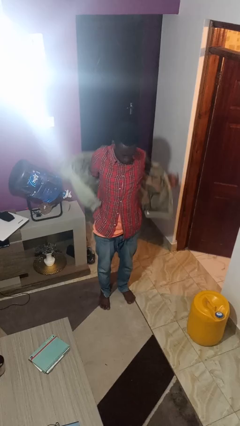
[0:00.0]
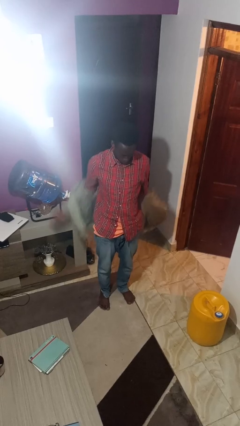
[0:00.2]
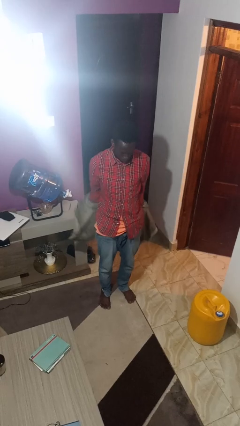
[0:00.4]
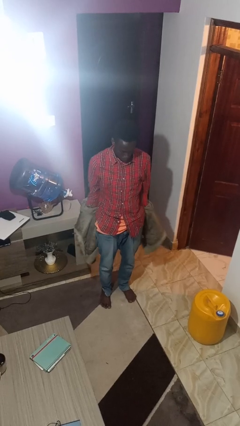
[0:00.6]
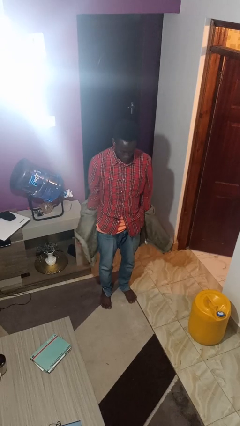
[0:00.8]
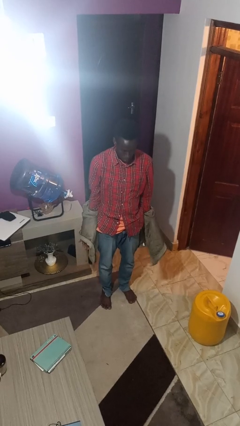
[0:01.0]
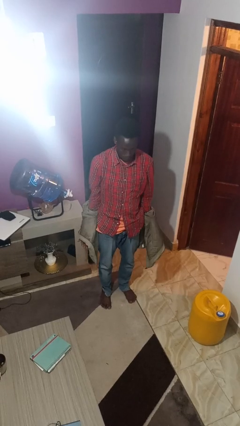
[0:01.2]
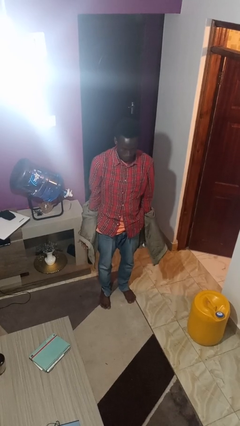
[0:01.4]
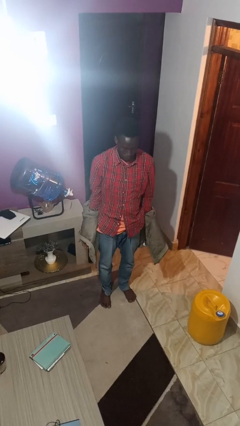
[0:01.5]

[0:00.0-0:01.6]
person takes off jacket

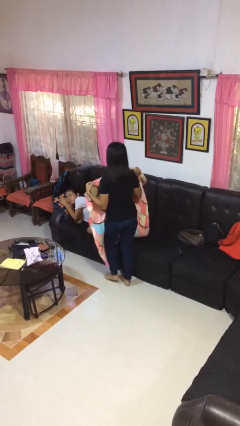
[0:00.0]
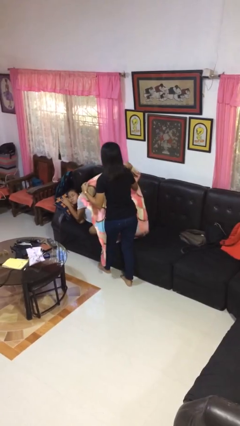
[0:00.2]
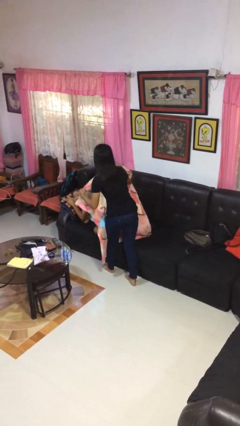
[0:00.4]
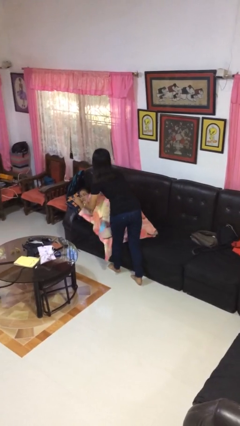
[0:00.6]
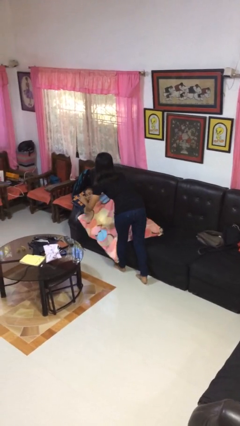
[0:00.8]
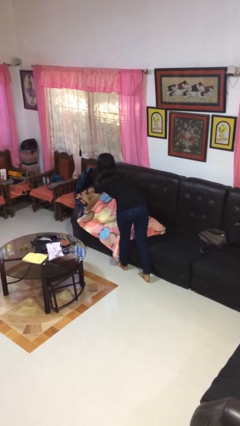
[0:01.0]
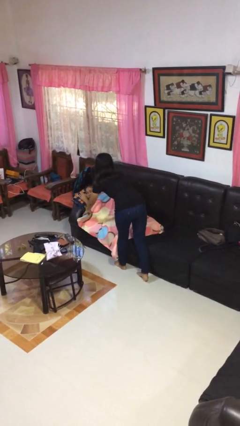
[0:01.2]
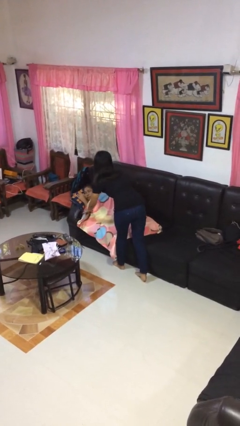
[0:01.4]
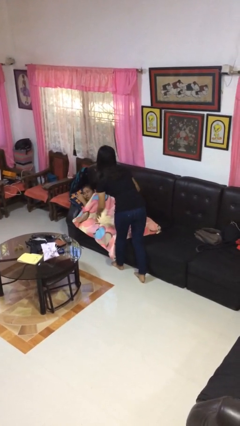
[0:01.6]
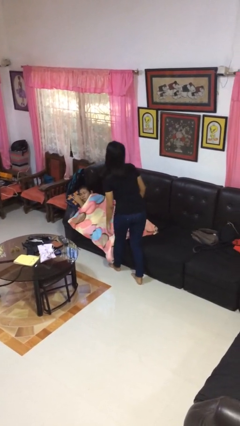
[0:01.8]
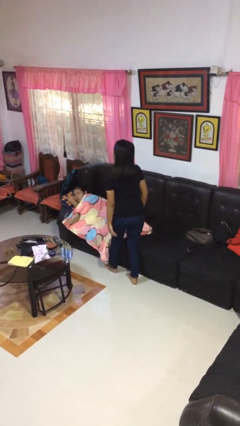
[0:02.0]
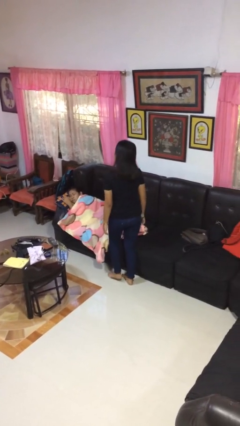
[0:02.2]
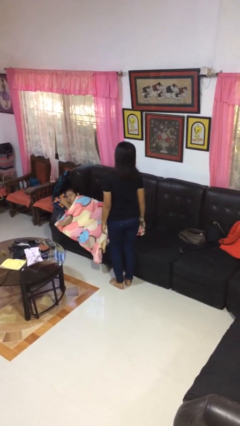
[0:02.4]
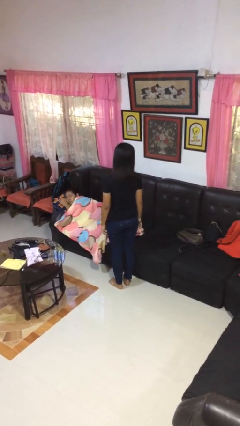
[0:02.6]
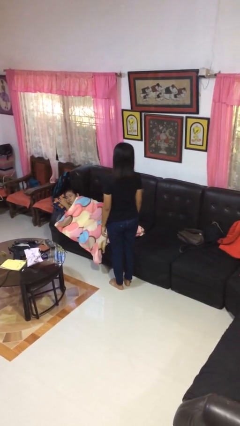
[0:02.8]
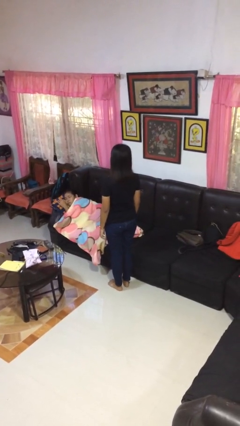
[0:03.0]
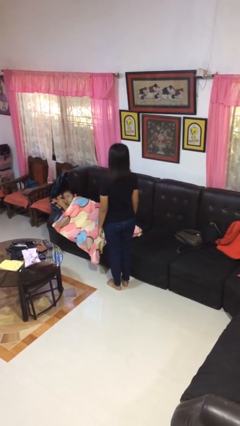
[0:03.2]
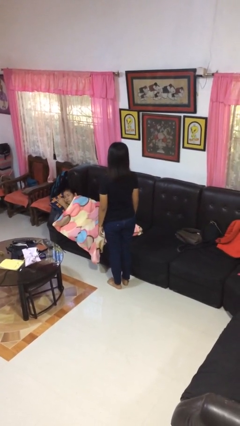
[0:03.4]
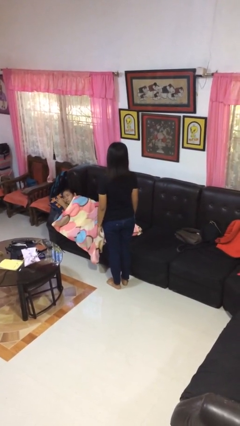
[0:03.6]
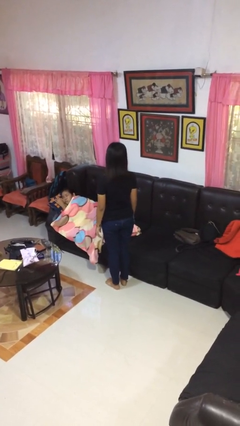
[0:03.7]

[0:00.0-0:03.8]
person covers friend with blanket

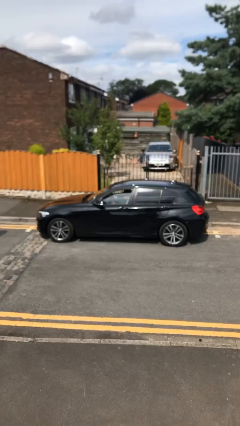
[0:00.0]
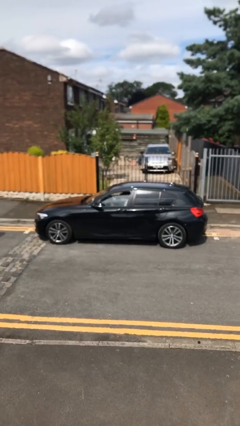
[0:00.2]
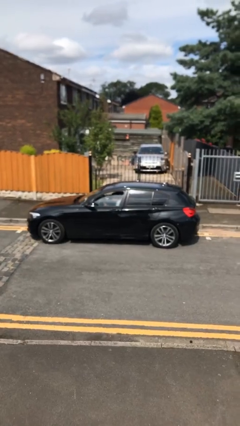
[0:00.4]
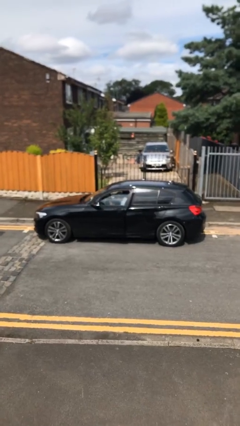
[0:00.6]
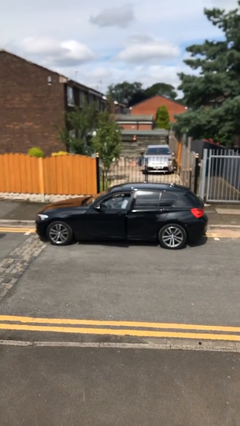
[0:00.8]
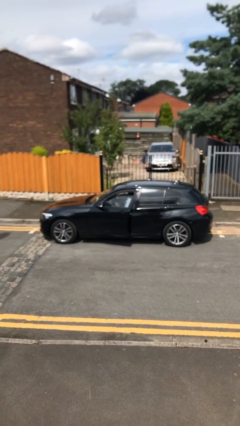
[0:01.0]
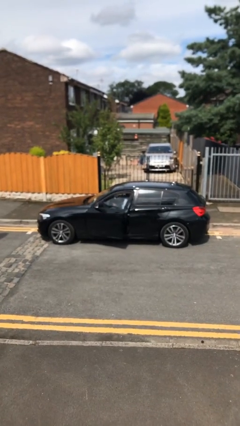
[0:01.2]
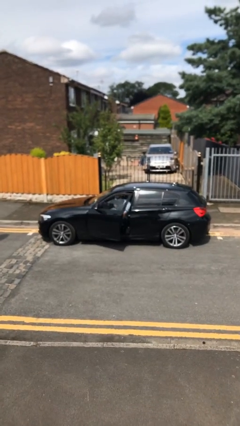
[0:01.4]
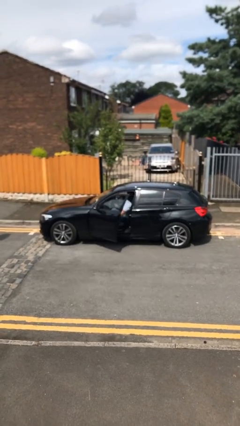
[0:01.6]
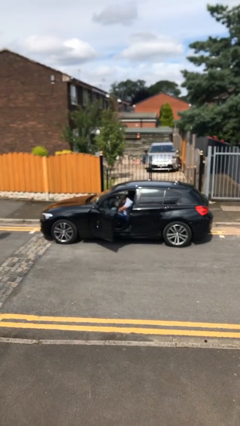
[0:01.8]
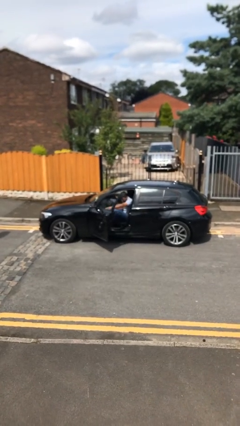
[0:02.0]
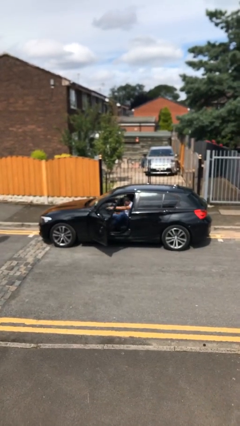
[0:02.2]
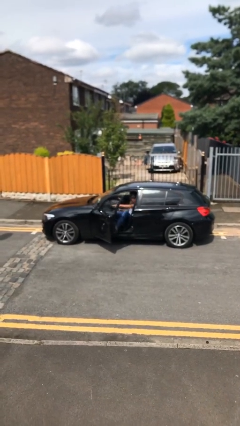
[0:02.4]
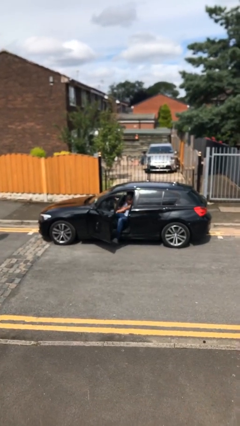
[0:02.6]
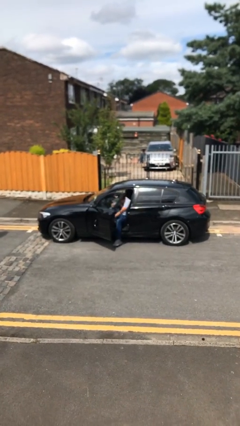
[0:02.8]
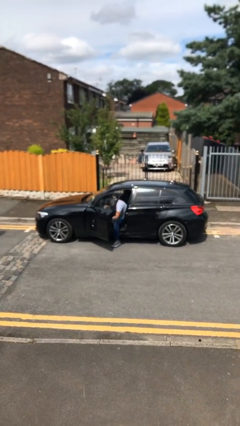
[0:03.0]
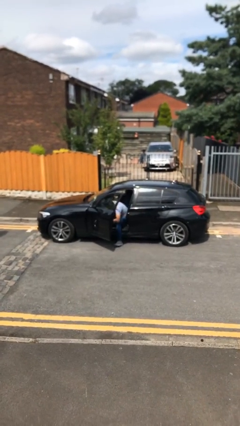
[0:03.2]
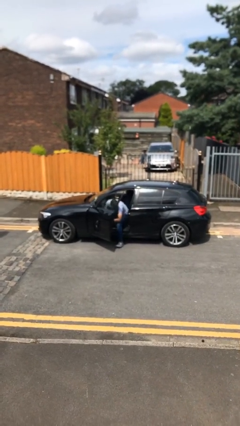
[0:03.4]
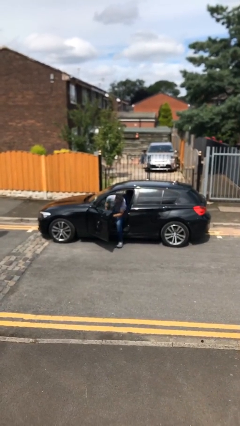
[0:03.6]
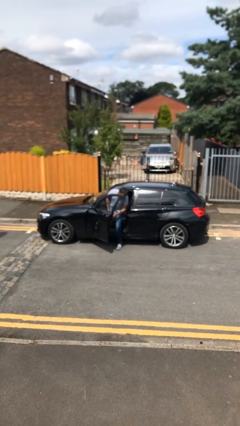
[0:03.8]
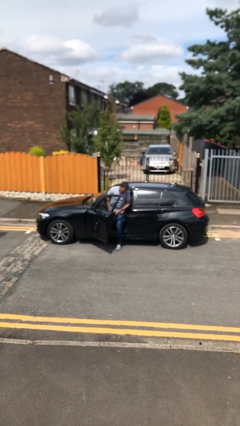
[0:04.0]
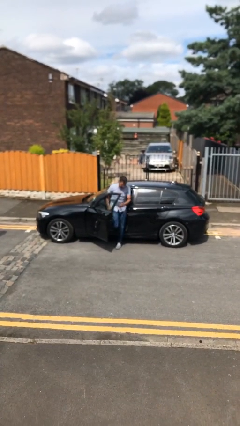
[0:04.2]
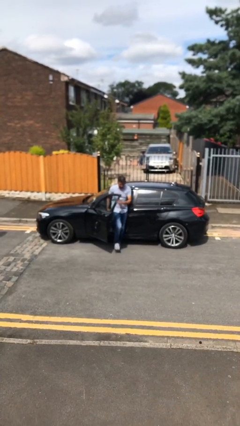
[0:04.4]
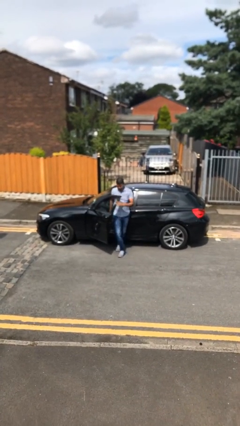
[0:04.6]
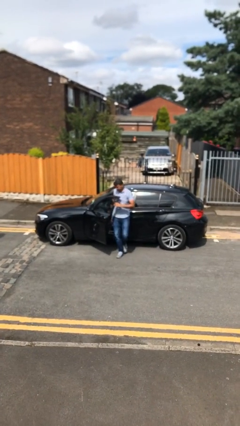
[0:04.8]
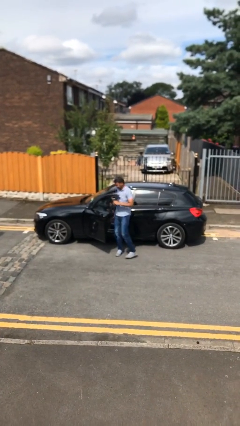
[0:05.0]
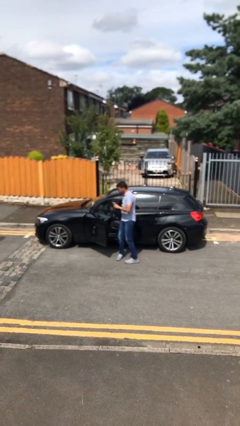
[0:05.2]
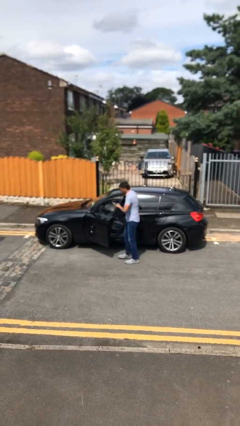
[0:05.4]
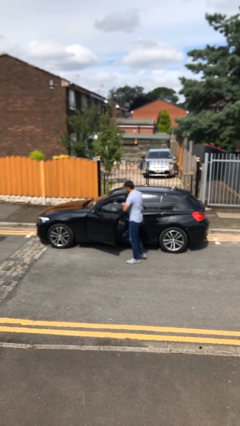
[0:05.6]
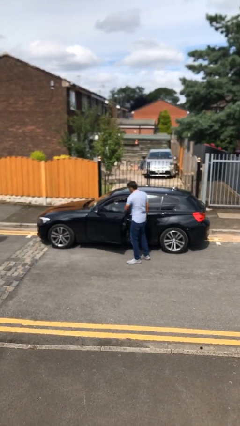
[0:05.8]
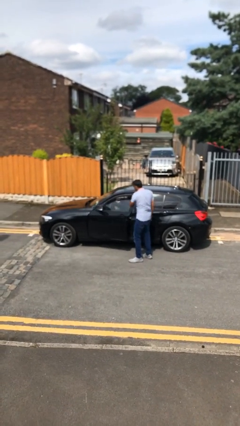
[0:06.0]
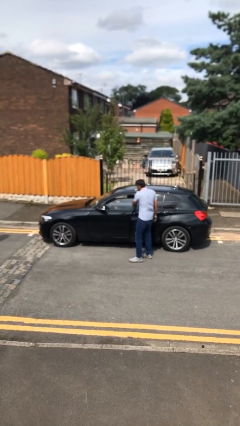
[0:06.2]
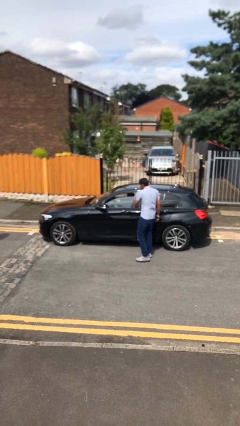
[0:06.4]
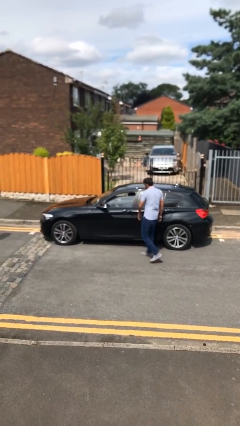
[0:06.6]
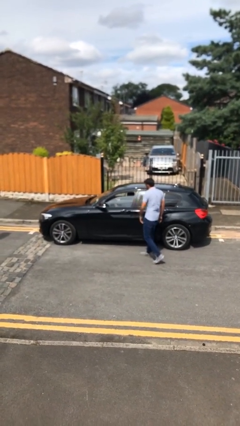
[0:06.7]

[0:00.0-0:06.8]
car drops off person

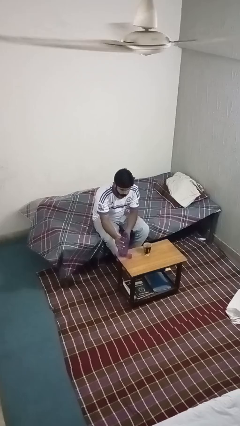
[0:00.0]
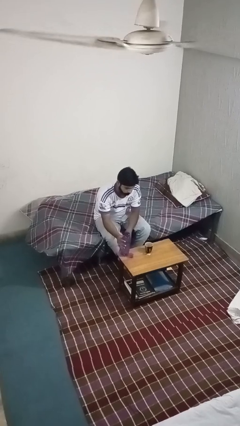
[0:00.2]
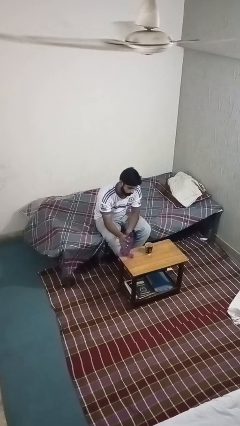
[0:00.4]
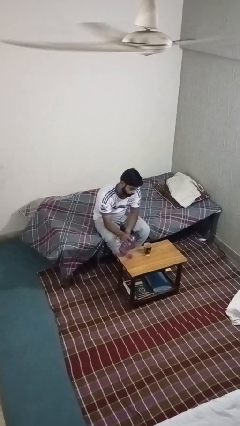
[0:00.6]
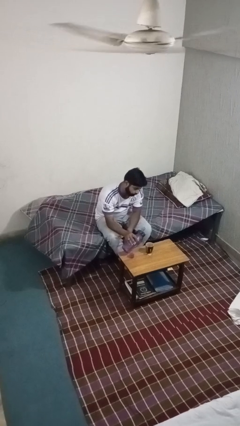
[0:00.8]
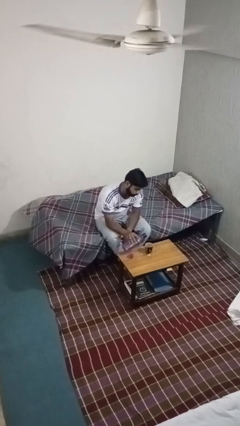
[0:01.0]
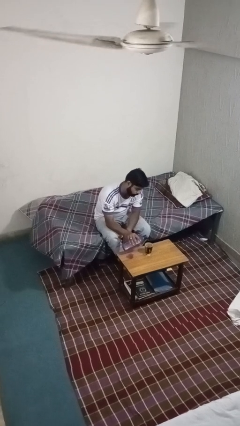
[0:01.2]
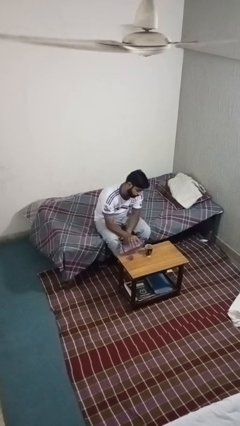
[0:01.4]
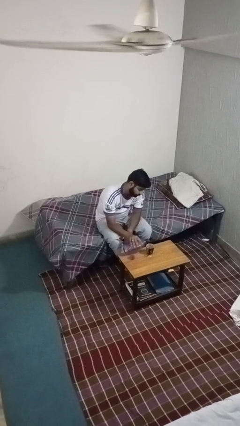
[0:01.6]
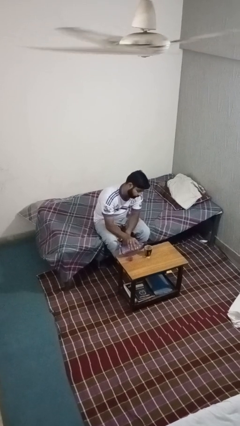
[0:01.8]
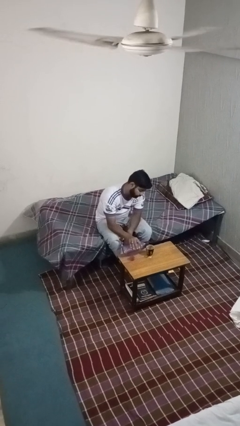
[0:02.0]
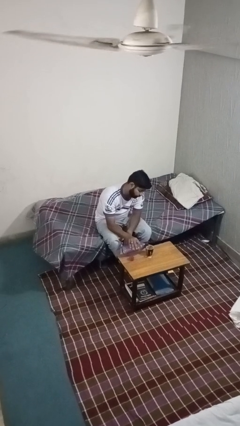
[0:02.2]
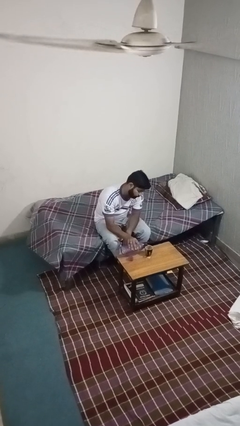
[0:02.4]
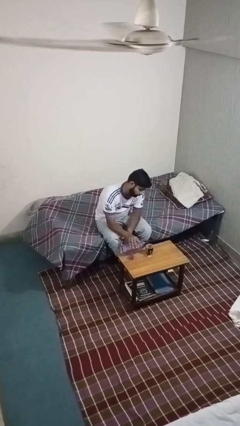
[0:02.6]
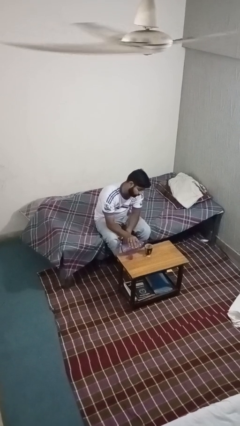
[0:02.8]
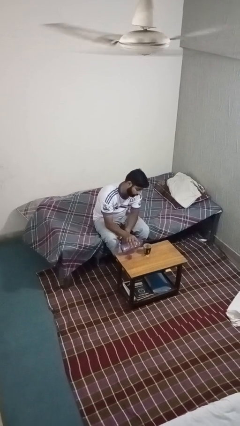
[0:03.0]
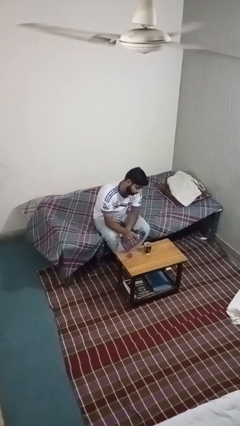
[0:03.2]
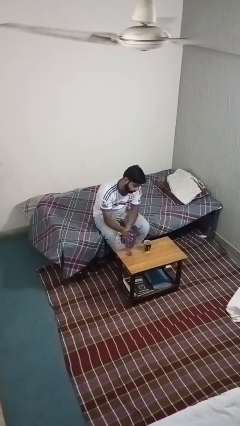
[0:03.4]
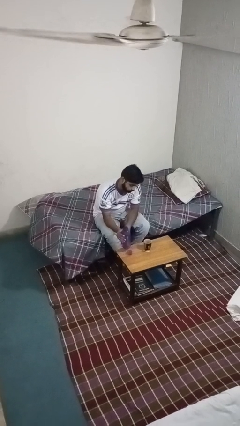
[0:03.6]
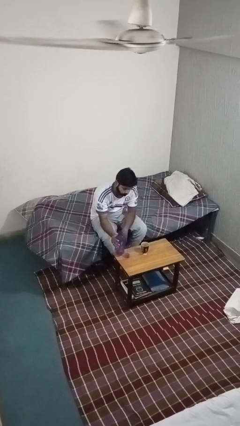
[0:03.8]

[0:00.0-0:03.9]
person pours liquid into cup

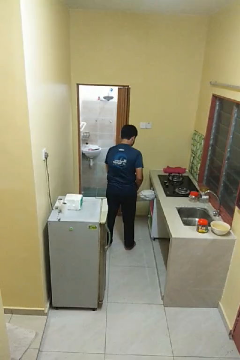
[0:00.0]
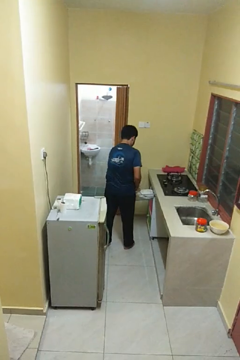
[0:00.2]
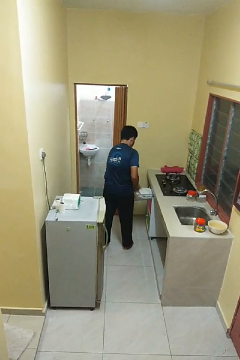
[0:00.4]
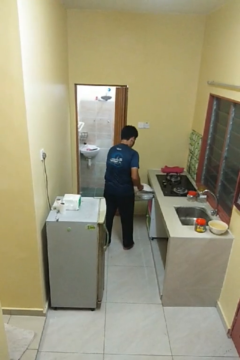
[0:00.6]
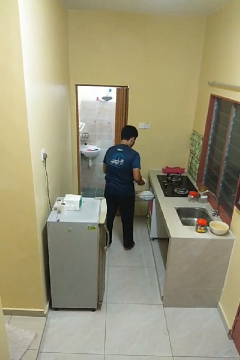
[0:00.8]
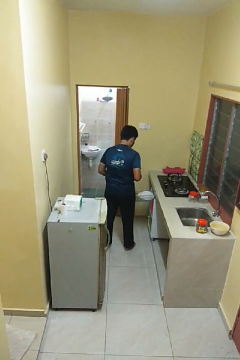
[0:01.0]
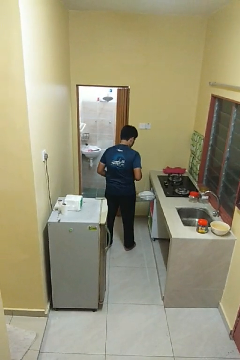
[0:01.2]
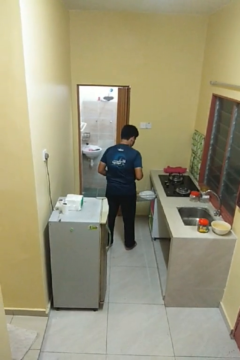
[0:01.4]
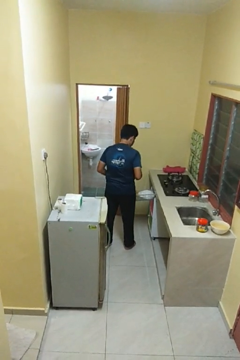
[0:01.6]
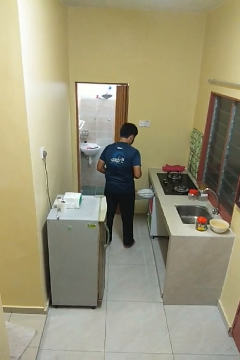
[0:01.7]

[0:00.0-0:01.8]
person takes object from kitchen drawer
